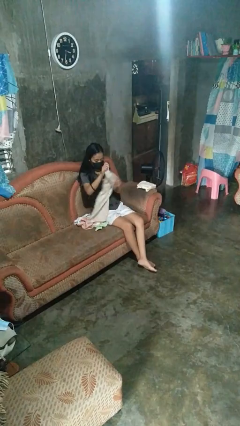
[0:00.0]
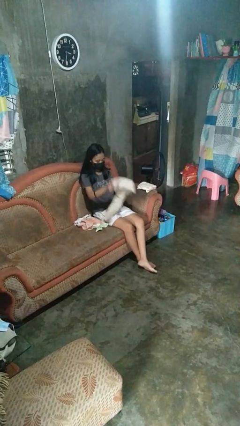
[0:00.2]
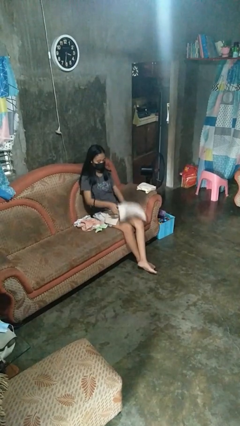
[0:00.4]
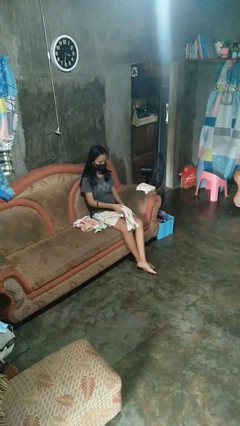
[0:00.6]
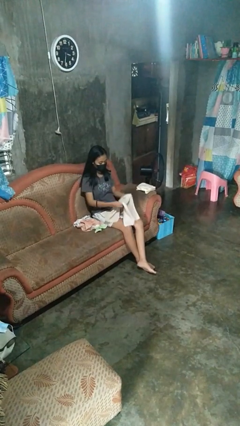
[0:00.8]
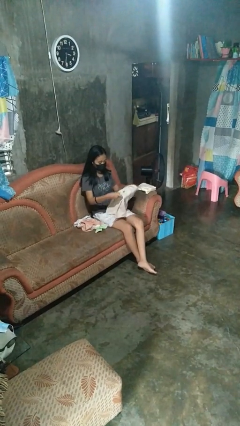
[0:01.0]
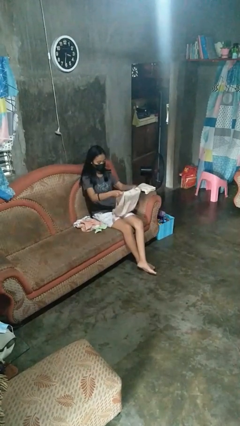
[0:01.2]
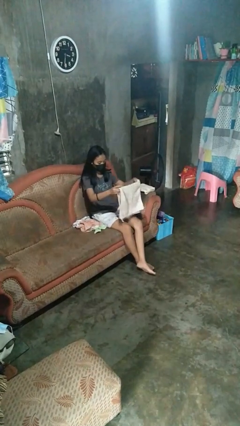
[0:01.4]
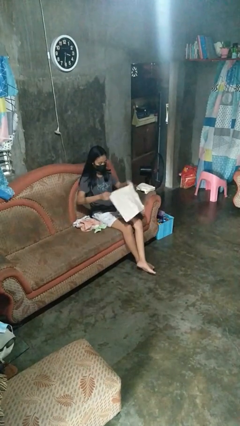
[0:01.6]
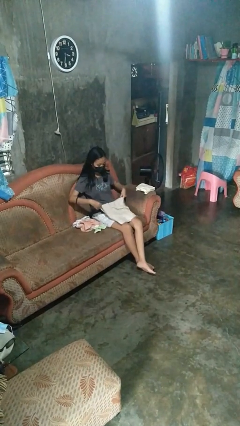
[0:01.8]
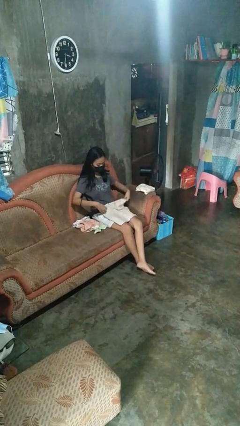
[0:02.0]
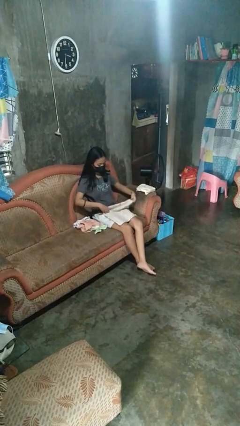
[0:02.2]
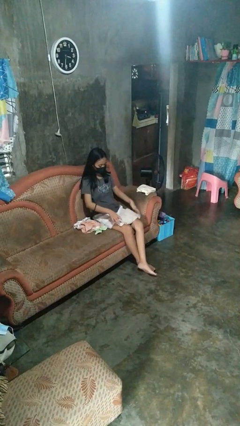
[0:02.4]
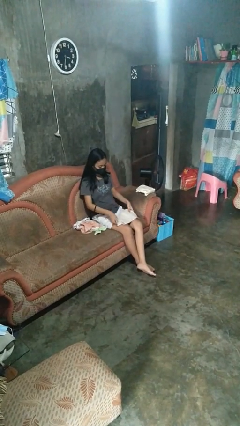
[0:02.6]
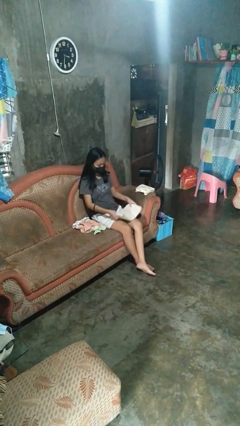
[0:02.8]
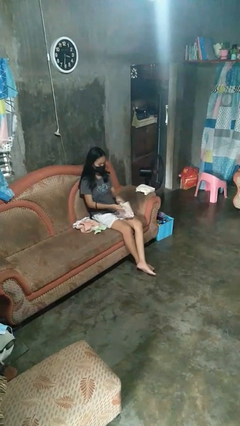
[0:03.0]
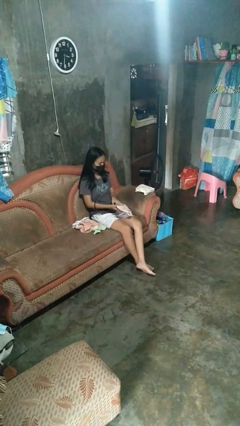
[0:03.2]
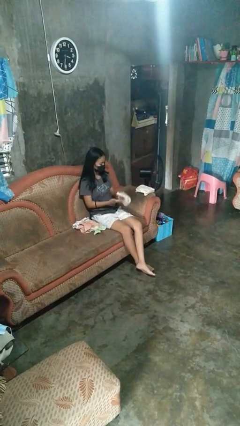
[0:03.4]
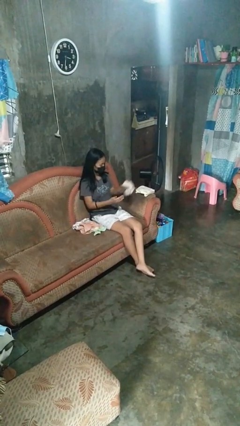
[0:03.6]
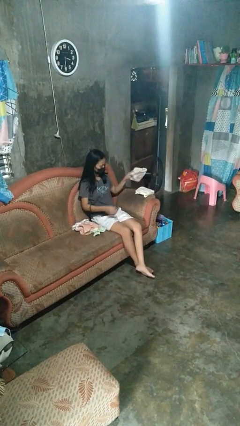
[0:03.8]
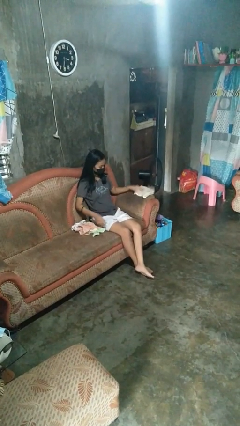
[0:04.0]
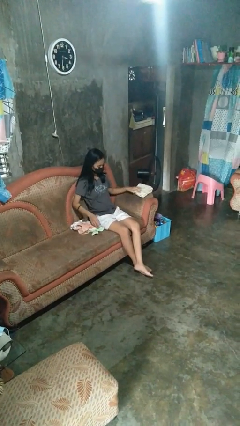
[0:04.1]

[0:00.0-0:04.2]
person folds towel

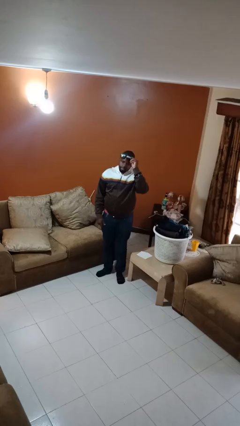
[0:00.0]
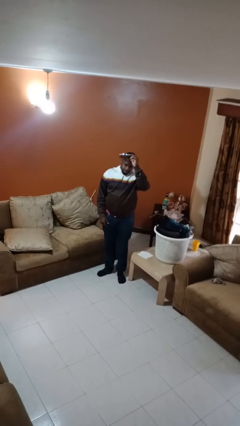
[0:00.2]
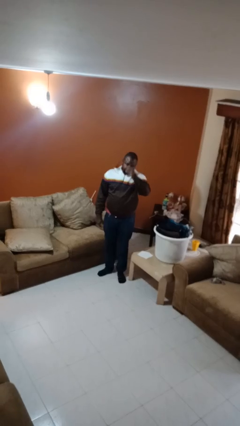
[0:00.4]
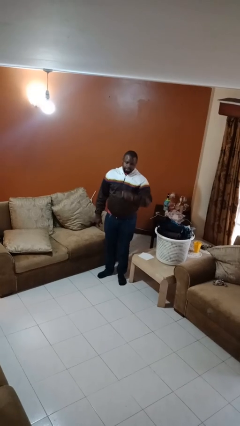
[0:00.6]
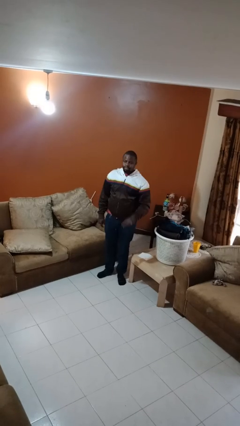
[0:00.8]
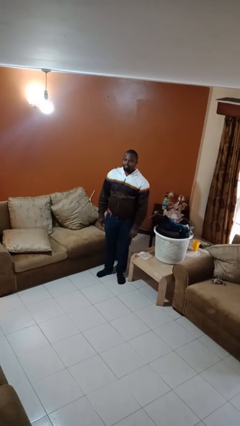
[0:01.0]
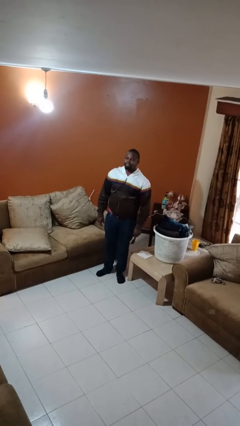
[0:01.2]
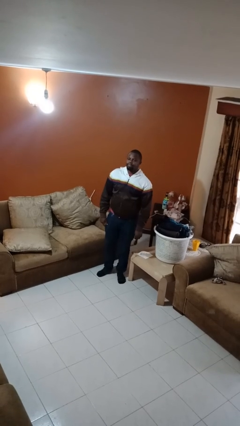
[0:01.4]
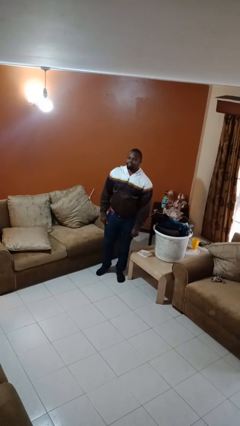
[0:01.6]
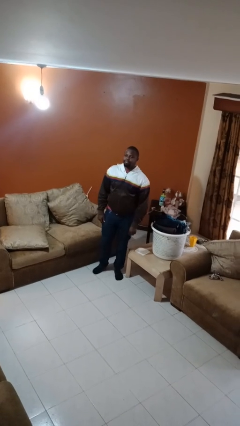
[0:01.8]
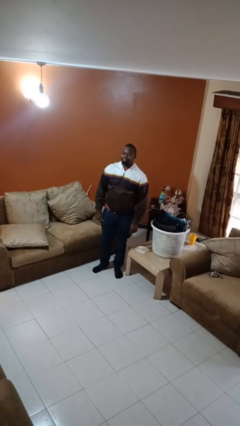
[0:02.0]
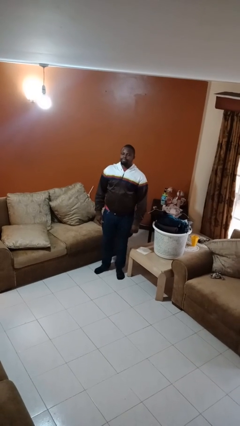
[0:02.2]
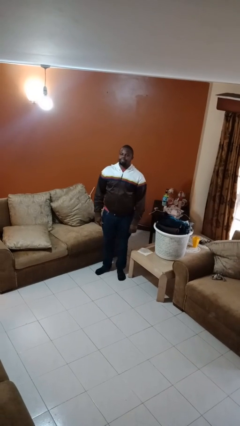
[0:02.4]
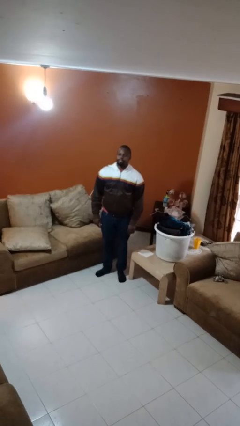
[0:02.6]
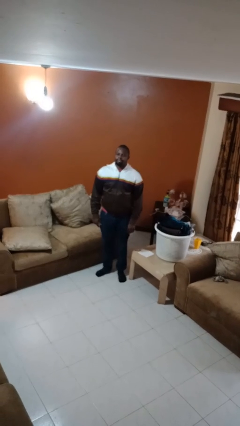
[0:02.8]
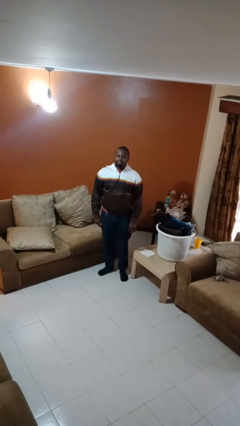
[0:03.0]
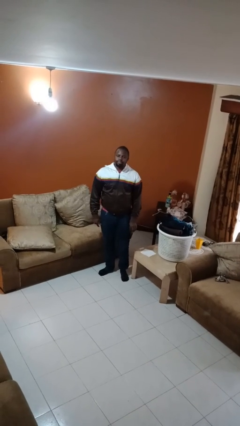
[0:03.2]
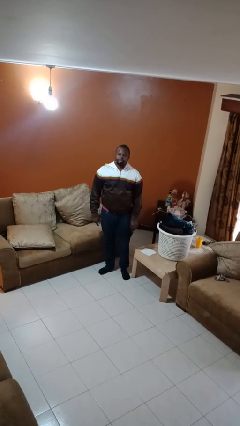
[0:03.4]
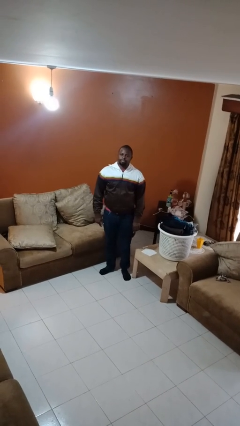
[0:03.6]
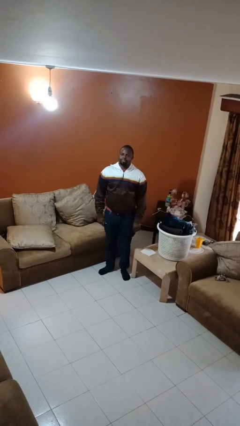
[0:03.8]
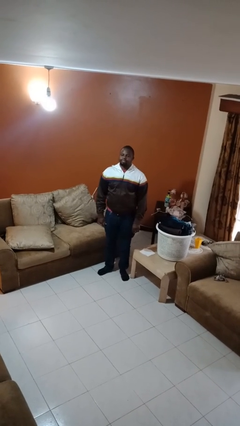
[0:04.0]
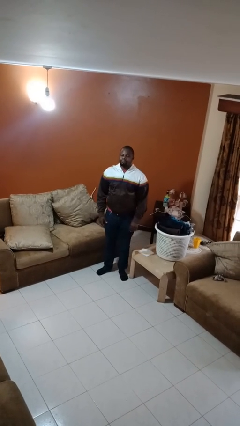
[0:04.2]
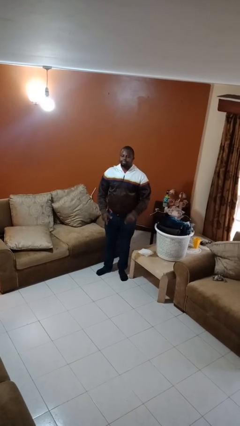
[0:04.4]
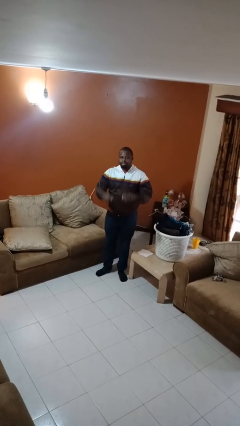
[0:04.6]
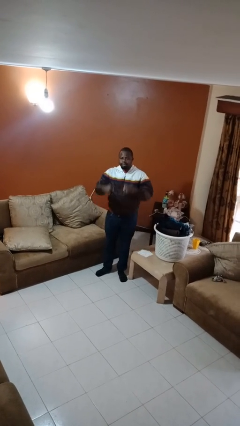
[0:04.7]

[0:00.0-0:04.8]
person takes off sunglasses

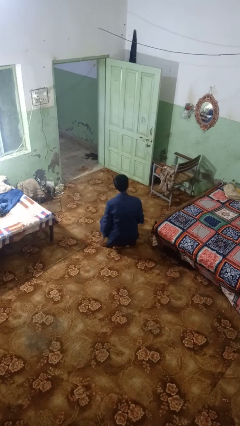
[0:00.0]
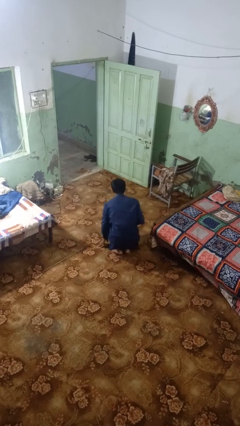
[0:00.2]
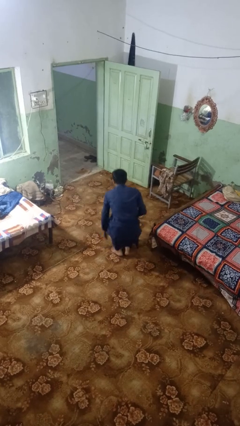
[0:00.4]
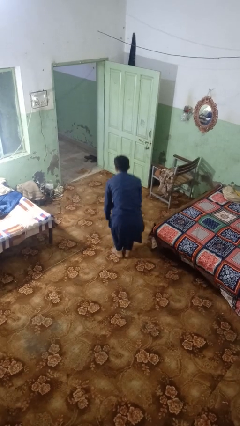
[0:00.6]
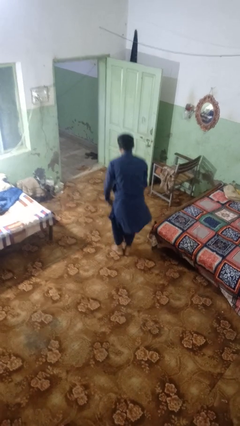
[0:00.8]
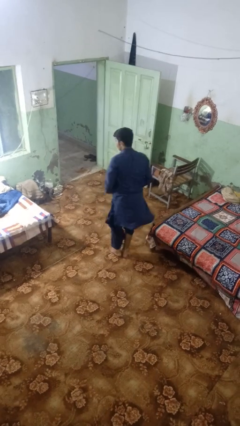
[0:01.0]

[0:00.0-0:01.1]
person crawls

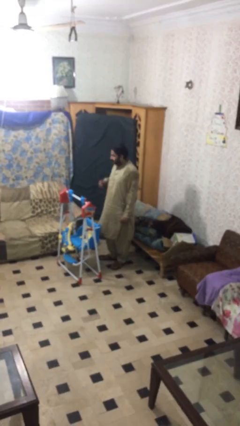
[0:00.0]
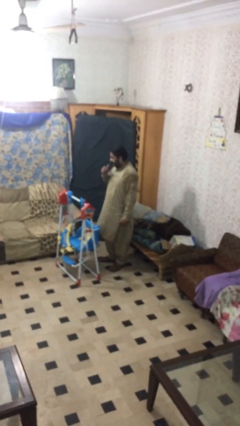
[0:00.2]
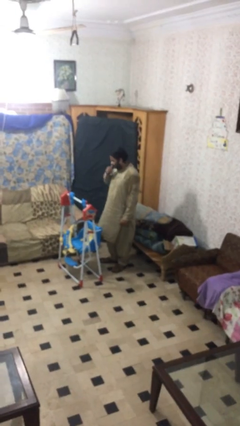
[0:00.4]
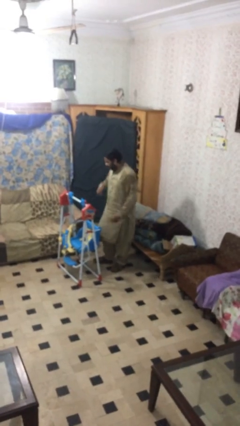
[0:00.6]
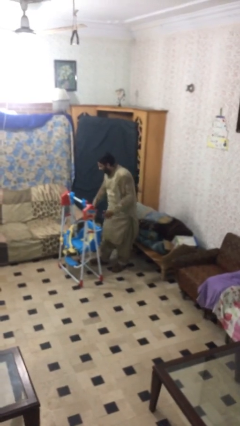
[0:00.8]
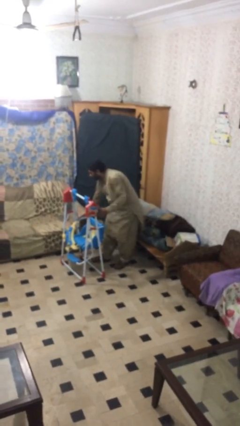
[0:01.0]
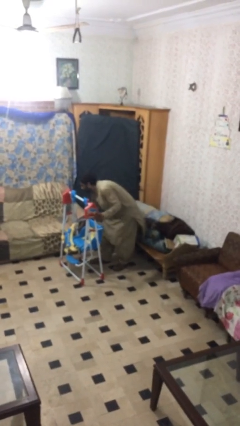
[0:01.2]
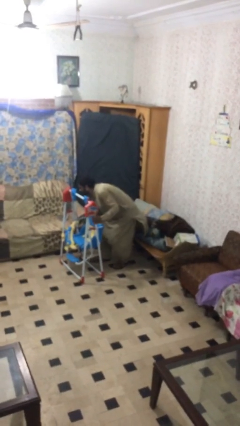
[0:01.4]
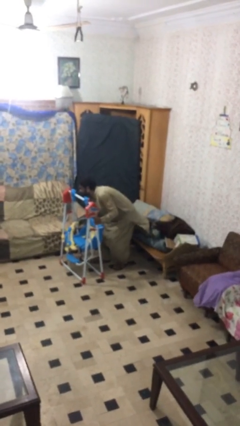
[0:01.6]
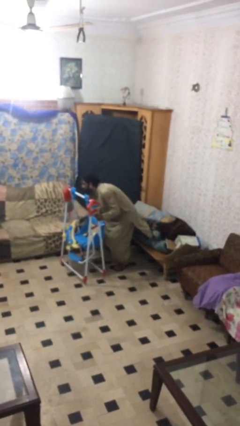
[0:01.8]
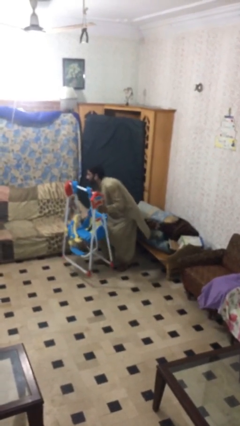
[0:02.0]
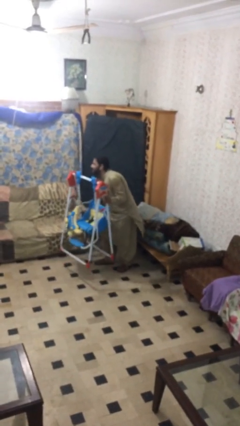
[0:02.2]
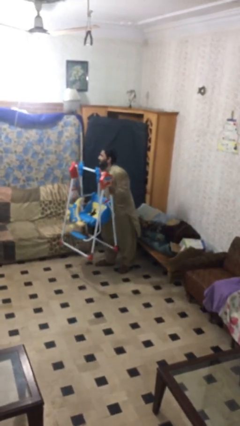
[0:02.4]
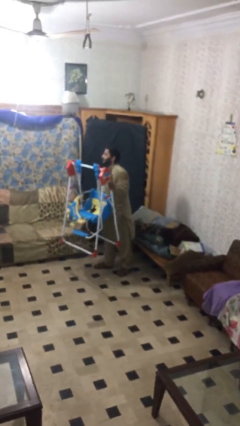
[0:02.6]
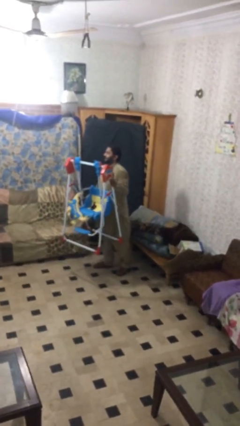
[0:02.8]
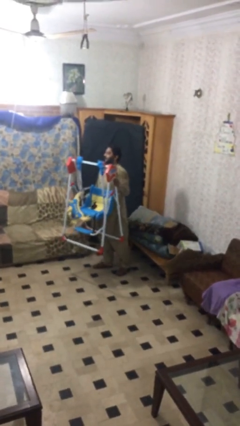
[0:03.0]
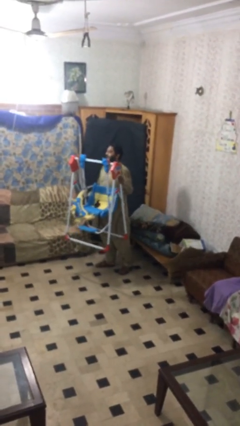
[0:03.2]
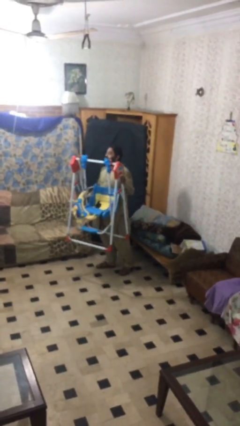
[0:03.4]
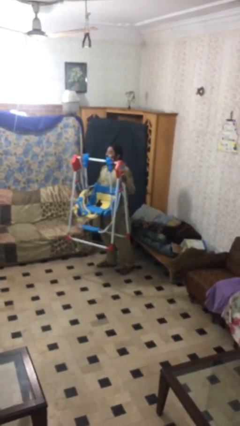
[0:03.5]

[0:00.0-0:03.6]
person picks up object from floor

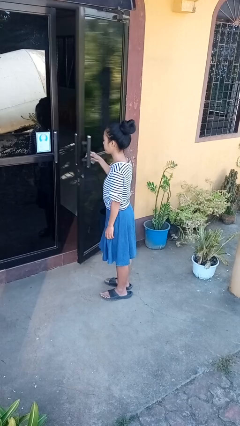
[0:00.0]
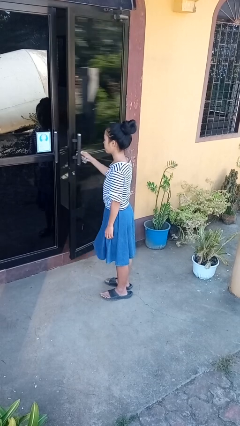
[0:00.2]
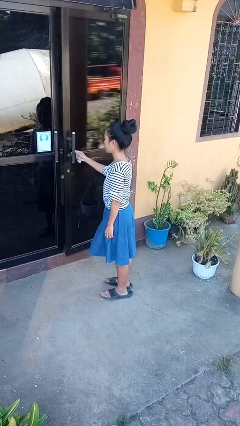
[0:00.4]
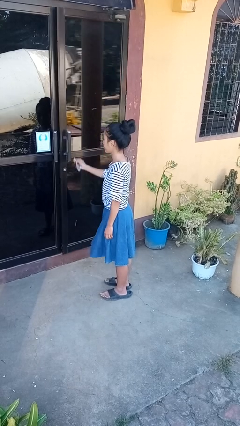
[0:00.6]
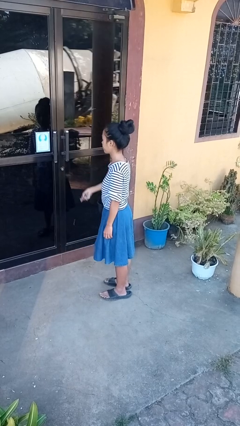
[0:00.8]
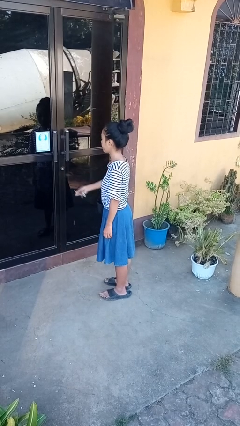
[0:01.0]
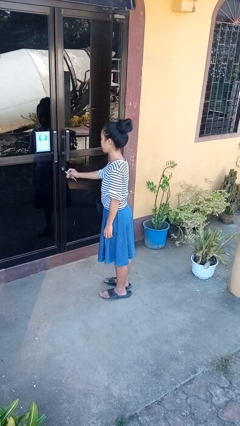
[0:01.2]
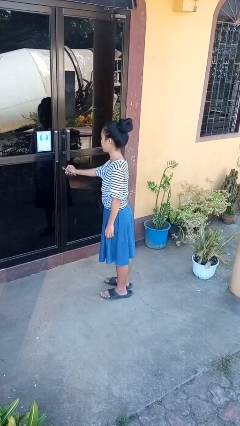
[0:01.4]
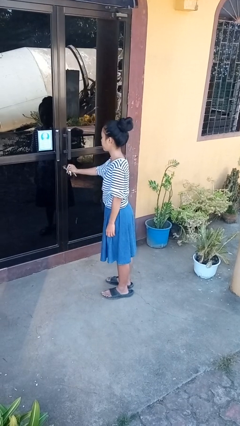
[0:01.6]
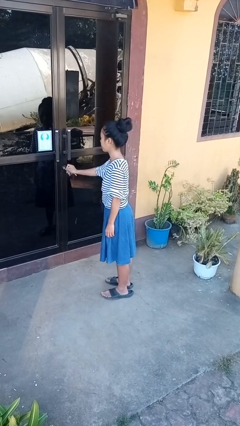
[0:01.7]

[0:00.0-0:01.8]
person closes facility door

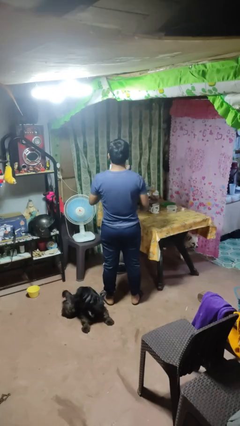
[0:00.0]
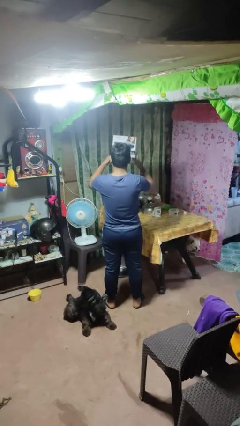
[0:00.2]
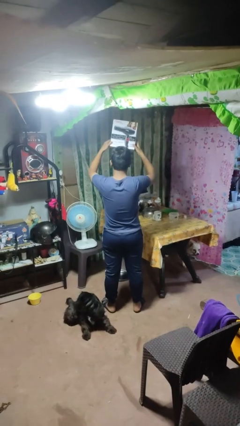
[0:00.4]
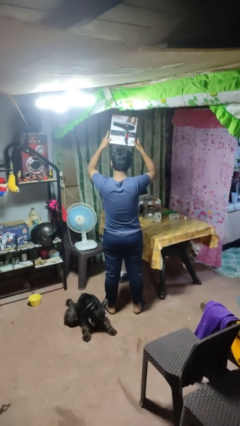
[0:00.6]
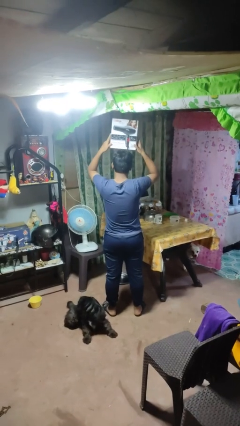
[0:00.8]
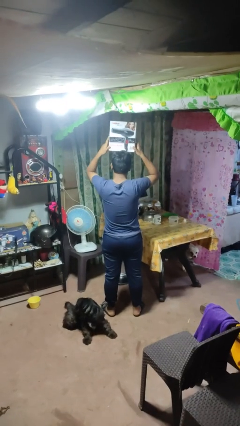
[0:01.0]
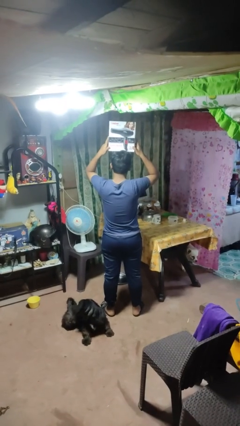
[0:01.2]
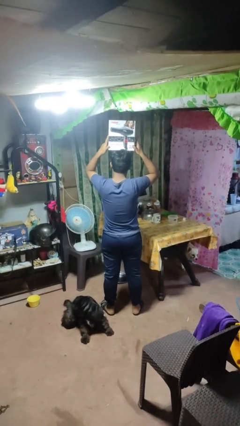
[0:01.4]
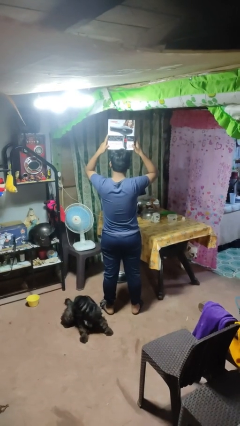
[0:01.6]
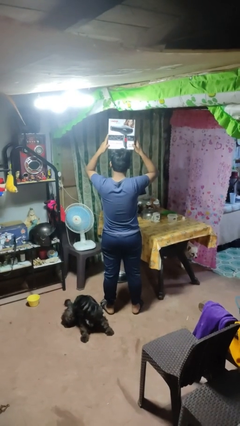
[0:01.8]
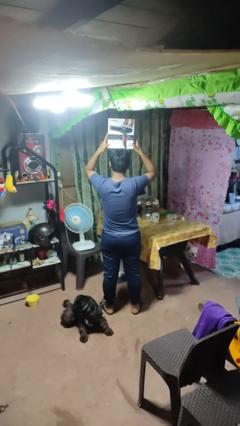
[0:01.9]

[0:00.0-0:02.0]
person holds object above head
